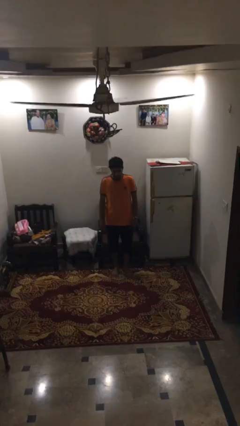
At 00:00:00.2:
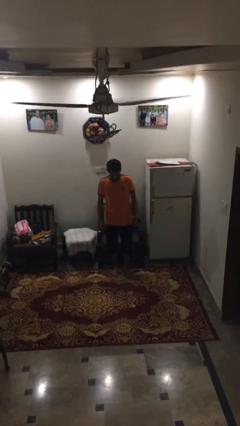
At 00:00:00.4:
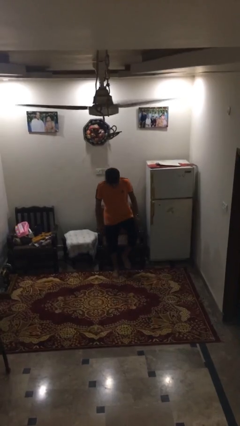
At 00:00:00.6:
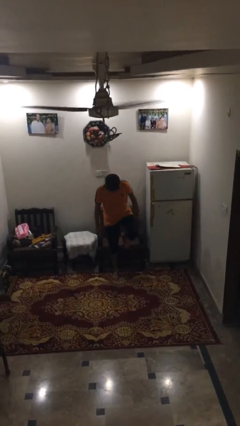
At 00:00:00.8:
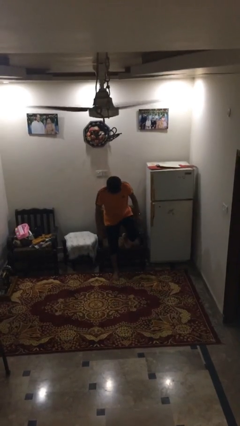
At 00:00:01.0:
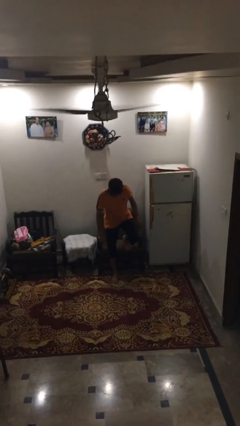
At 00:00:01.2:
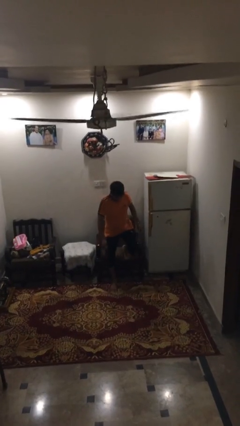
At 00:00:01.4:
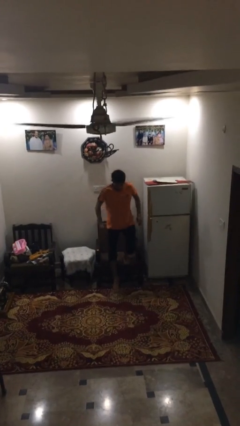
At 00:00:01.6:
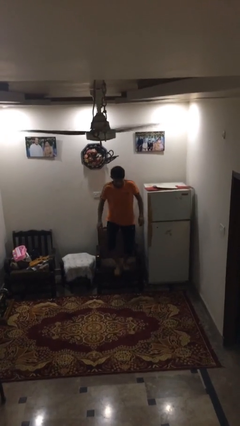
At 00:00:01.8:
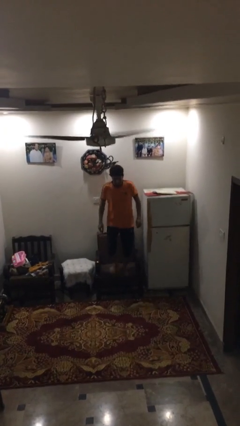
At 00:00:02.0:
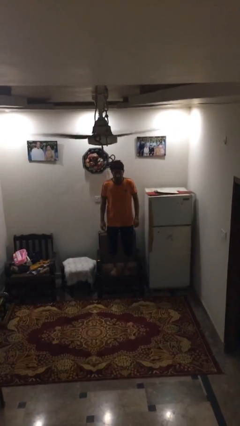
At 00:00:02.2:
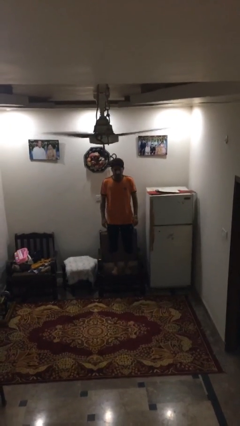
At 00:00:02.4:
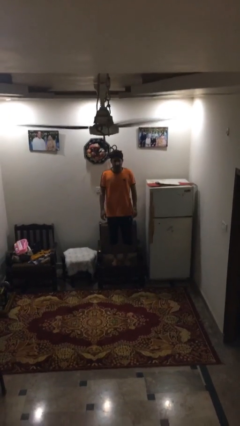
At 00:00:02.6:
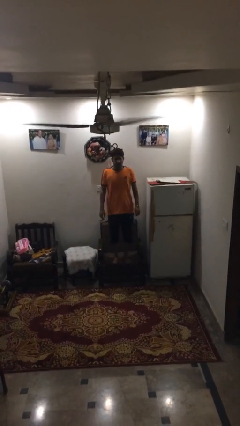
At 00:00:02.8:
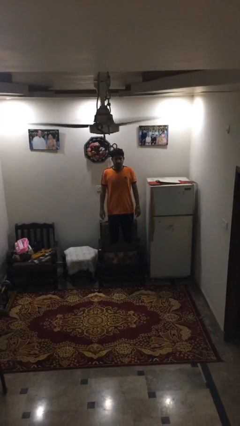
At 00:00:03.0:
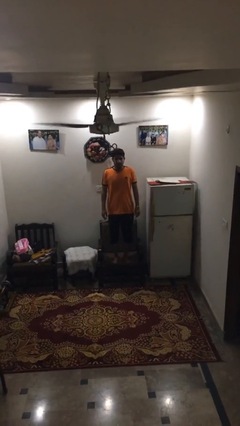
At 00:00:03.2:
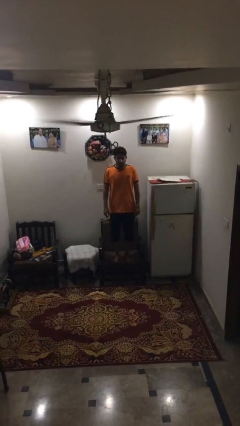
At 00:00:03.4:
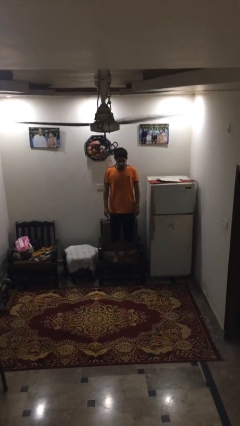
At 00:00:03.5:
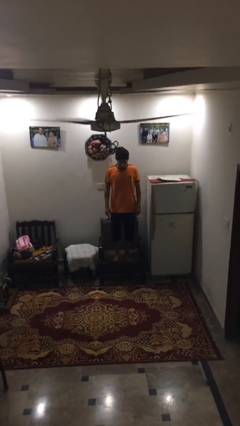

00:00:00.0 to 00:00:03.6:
person climbs on couch

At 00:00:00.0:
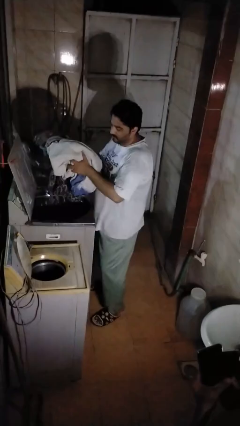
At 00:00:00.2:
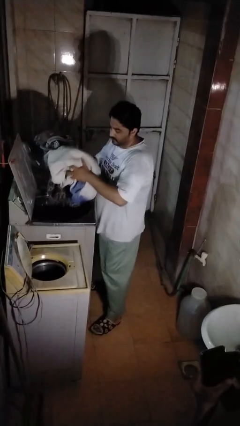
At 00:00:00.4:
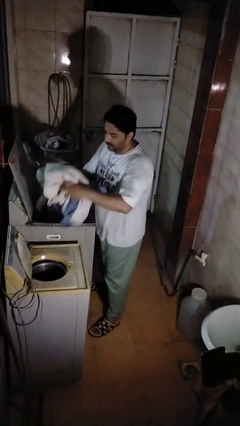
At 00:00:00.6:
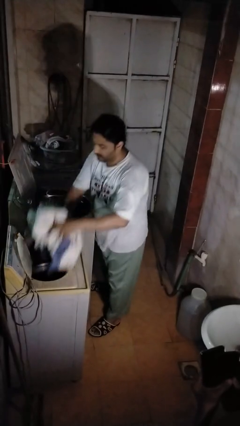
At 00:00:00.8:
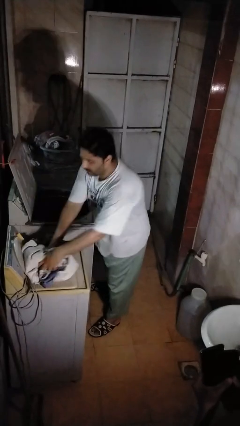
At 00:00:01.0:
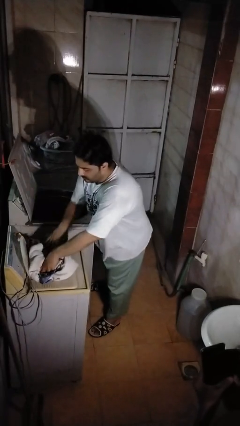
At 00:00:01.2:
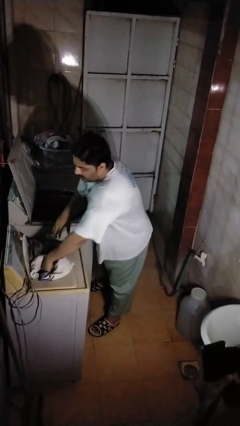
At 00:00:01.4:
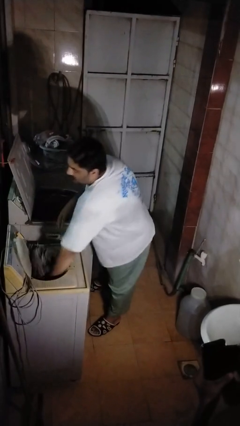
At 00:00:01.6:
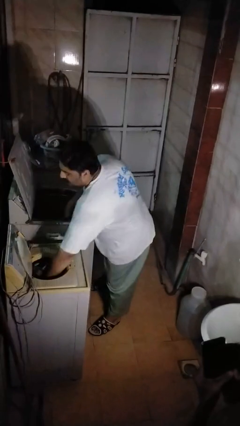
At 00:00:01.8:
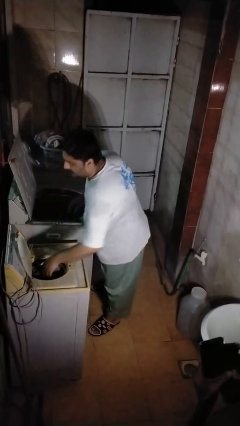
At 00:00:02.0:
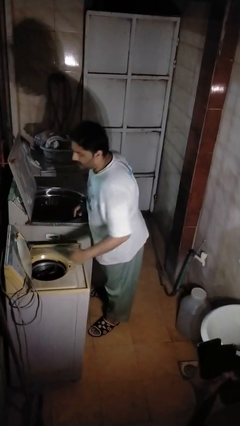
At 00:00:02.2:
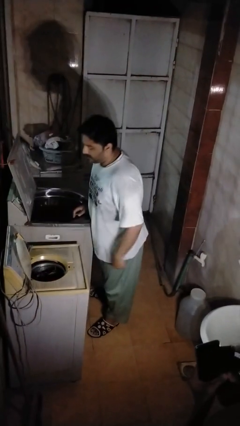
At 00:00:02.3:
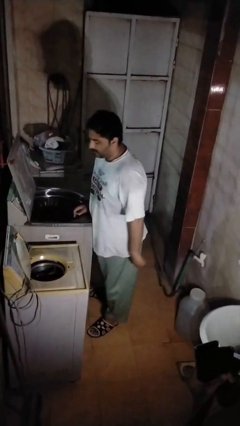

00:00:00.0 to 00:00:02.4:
person loads dryer

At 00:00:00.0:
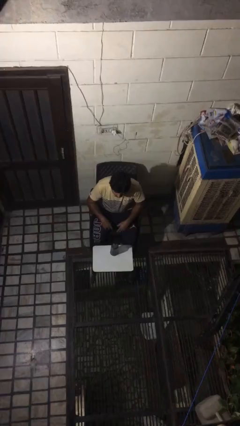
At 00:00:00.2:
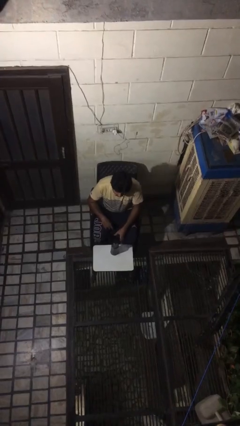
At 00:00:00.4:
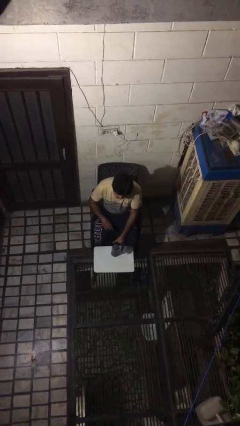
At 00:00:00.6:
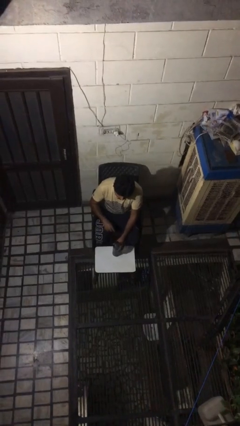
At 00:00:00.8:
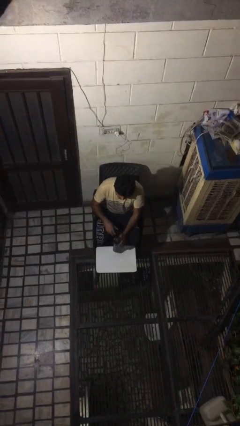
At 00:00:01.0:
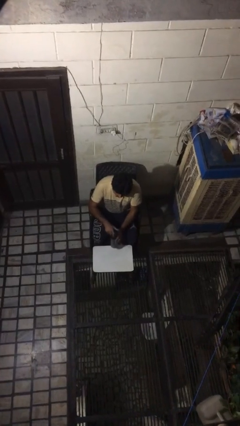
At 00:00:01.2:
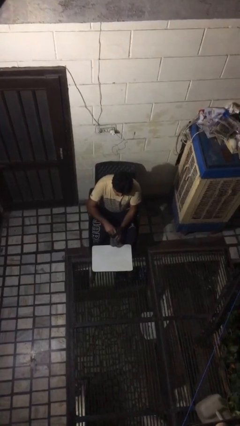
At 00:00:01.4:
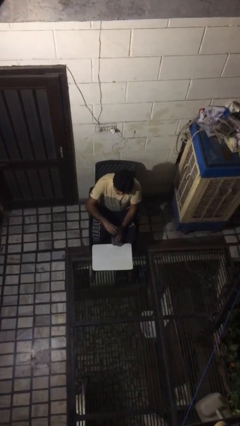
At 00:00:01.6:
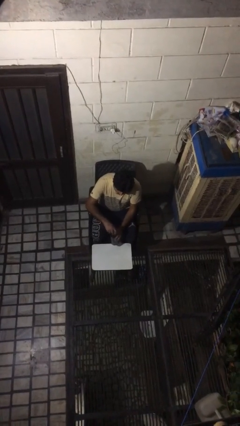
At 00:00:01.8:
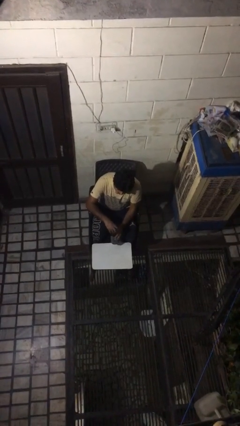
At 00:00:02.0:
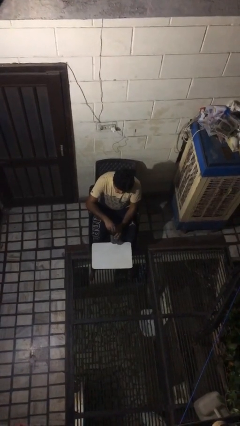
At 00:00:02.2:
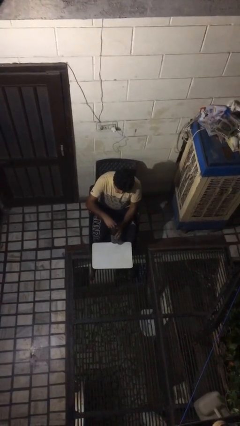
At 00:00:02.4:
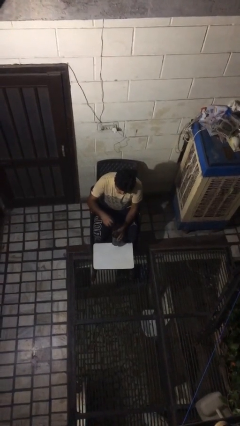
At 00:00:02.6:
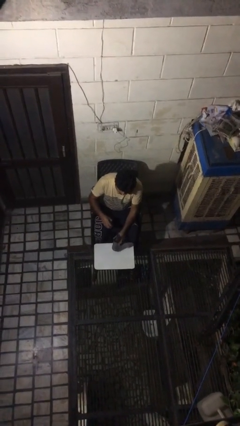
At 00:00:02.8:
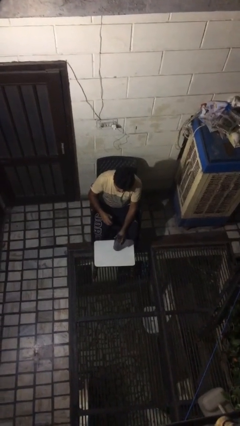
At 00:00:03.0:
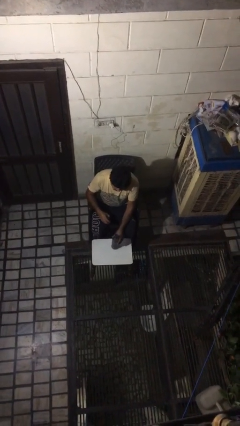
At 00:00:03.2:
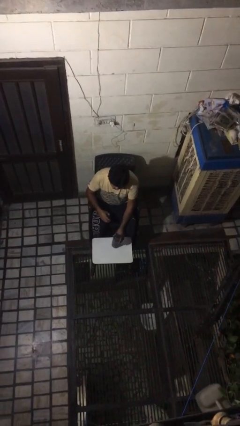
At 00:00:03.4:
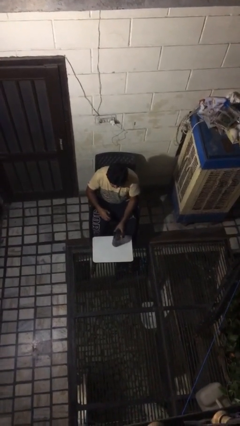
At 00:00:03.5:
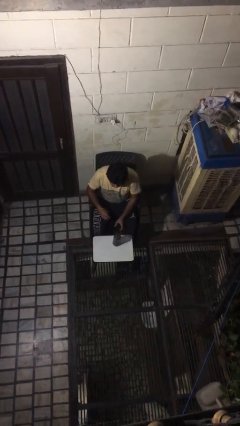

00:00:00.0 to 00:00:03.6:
person unscrews lid from bottle

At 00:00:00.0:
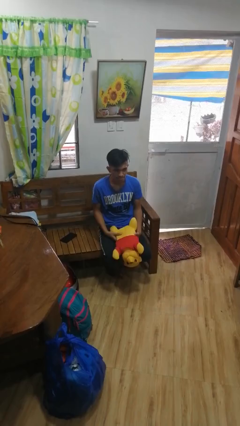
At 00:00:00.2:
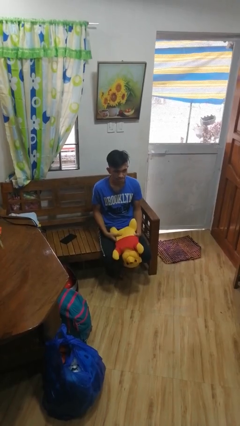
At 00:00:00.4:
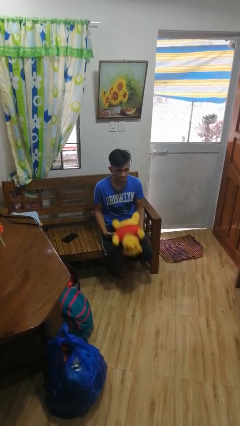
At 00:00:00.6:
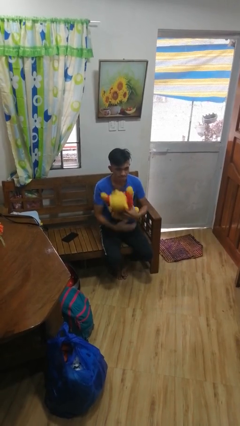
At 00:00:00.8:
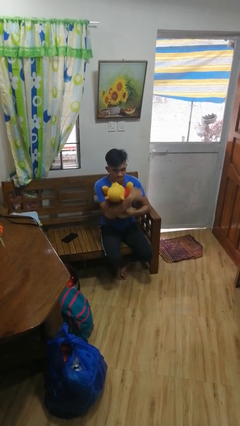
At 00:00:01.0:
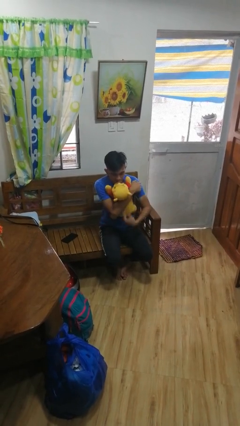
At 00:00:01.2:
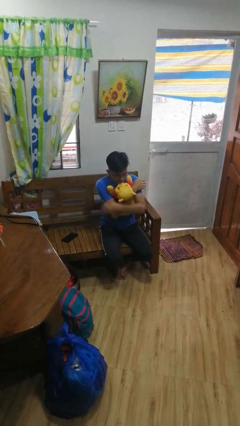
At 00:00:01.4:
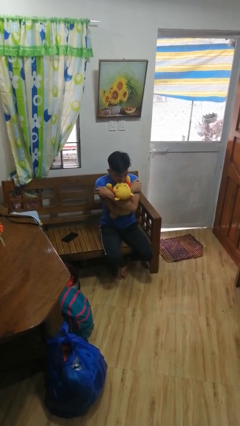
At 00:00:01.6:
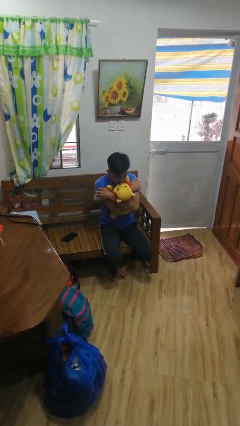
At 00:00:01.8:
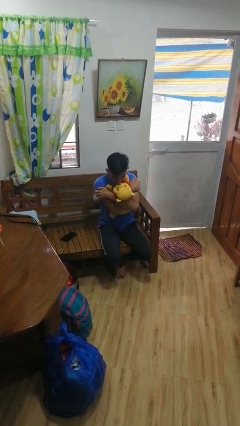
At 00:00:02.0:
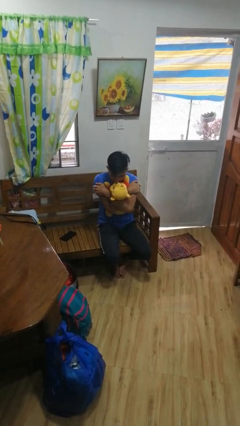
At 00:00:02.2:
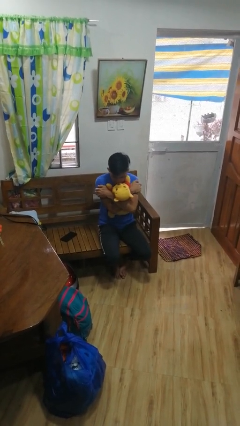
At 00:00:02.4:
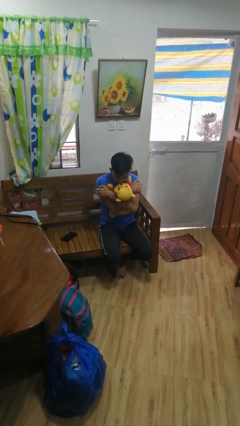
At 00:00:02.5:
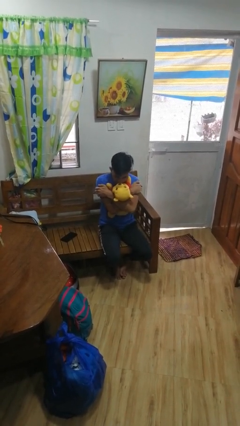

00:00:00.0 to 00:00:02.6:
person hugs stuffed animal

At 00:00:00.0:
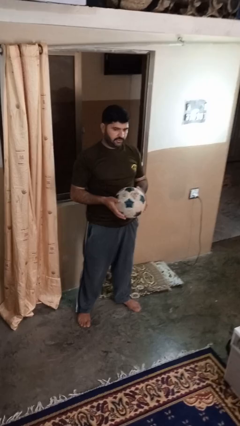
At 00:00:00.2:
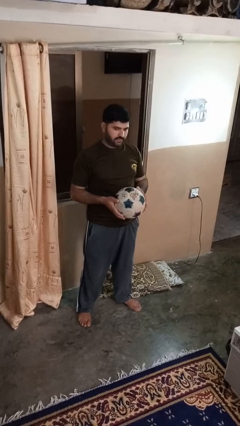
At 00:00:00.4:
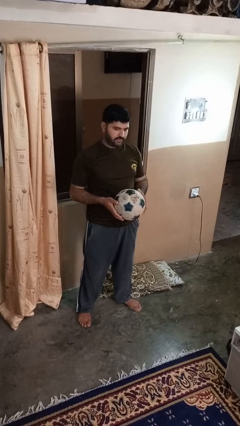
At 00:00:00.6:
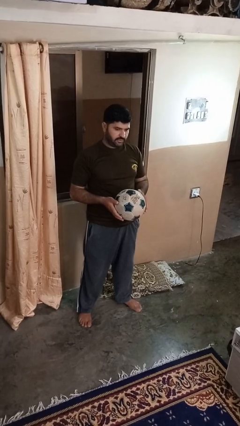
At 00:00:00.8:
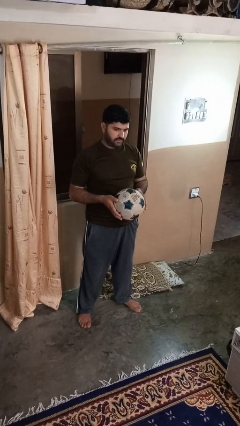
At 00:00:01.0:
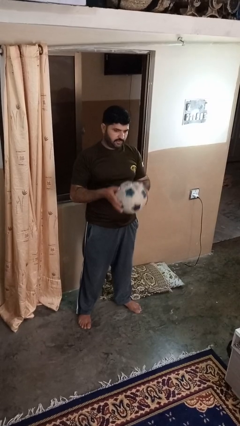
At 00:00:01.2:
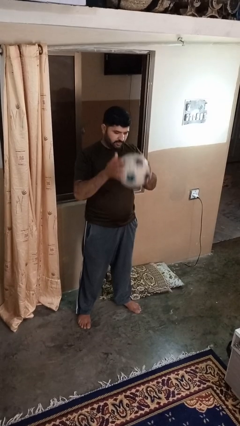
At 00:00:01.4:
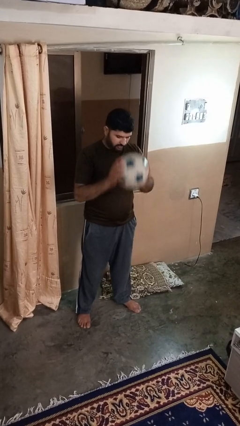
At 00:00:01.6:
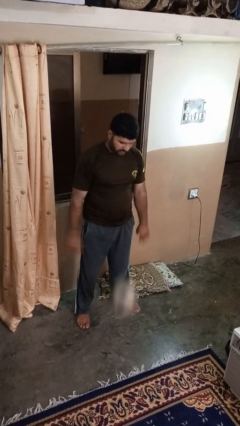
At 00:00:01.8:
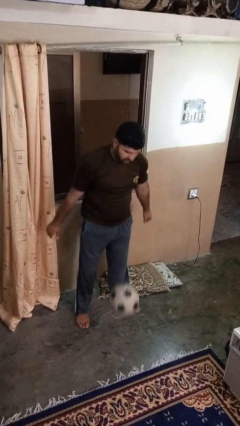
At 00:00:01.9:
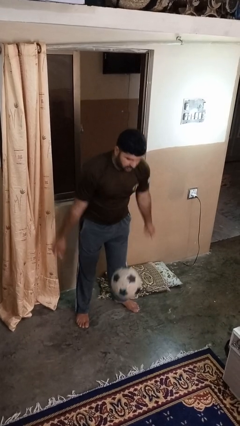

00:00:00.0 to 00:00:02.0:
person bounces ball on floor

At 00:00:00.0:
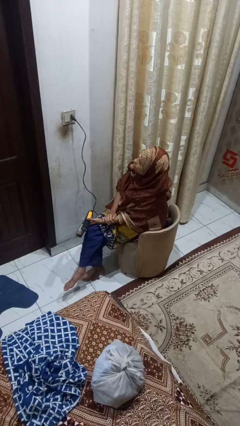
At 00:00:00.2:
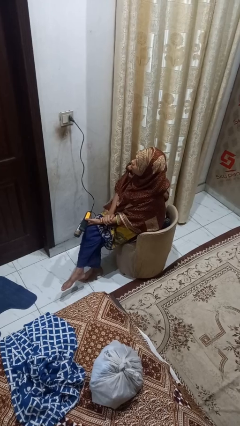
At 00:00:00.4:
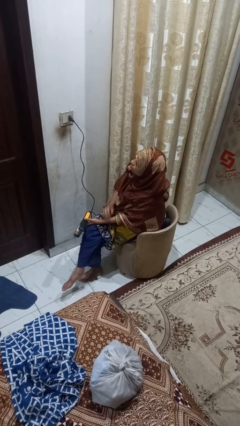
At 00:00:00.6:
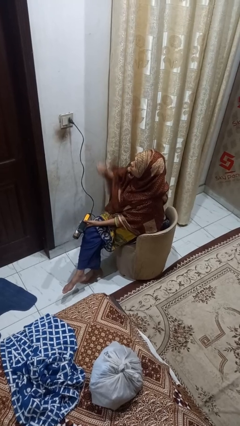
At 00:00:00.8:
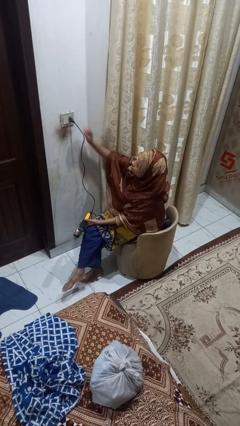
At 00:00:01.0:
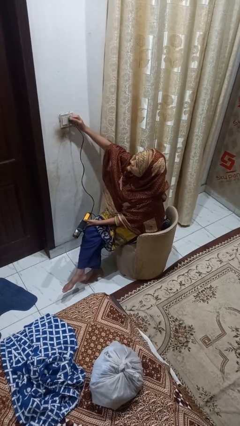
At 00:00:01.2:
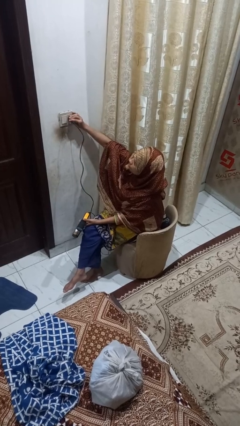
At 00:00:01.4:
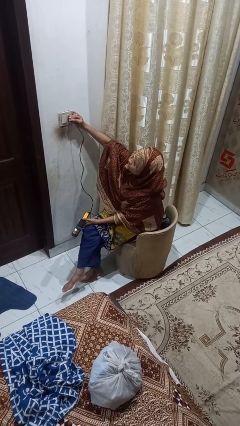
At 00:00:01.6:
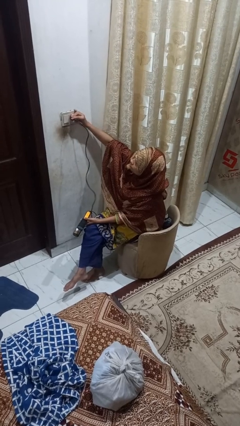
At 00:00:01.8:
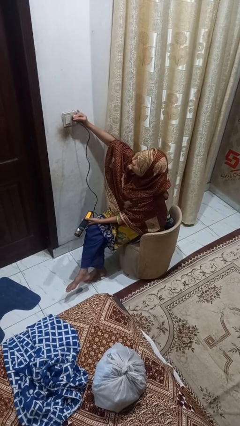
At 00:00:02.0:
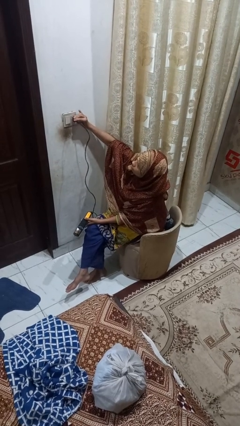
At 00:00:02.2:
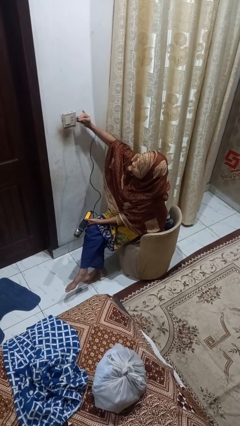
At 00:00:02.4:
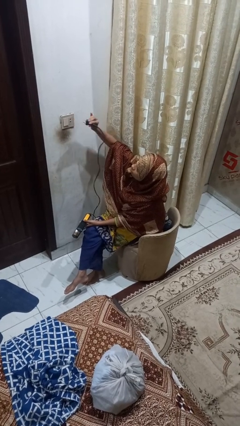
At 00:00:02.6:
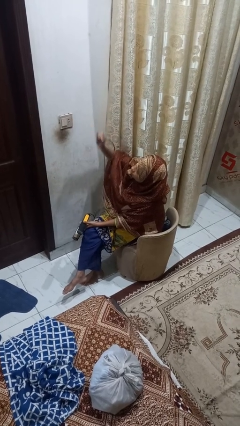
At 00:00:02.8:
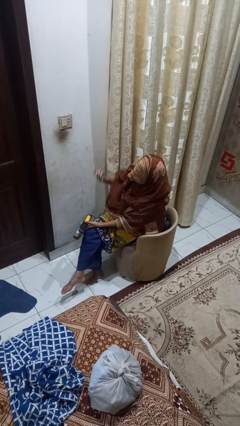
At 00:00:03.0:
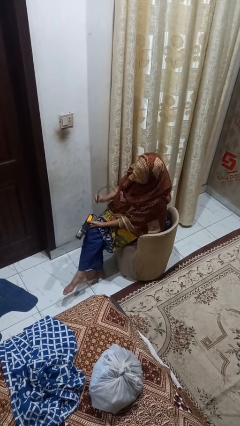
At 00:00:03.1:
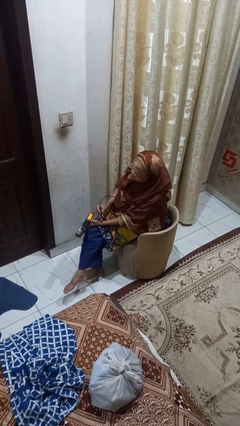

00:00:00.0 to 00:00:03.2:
person unplugs from electrical socket
